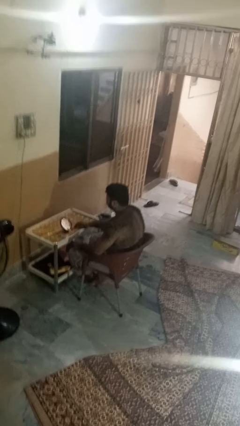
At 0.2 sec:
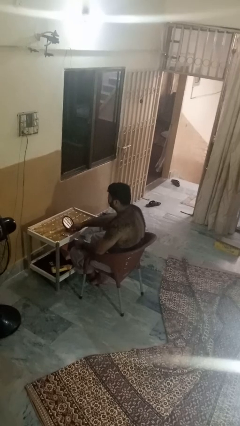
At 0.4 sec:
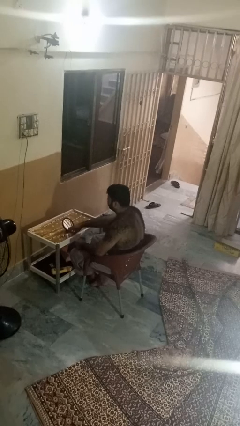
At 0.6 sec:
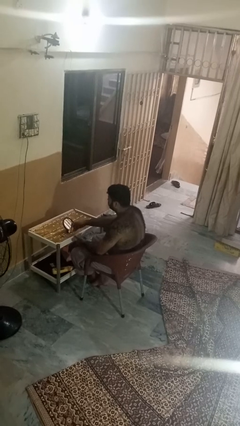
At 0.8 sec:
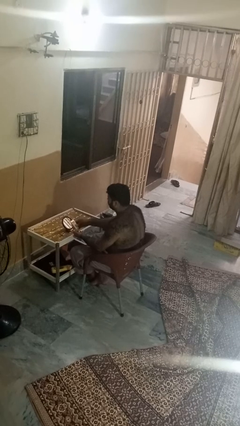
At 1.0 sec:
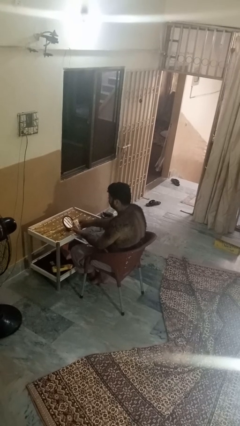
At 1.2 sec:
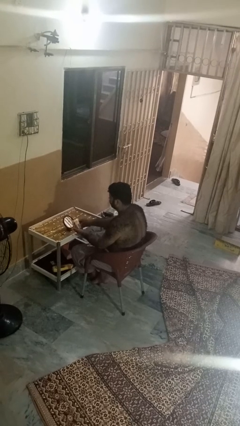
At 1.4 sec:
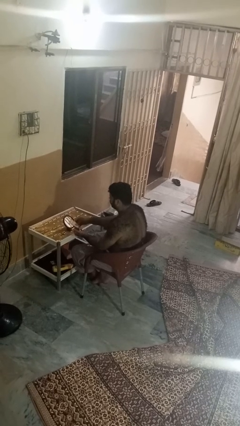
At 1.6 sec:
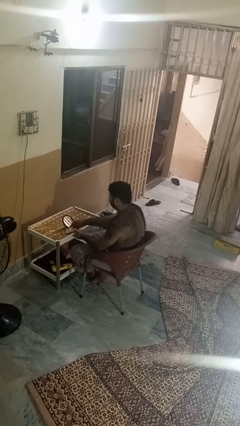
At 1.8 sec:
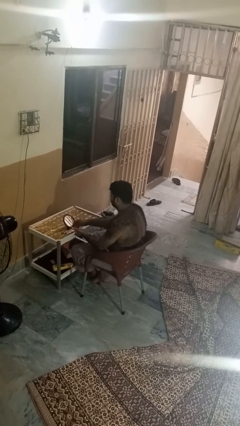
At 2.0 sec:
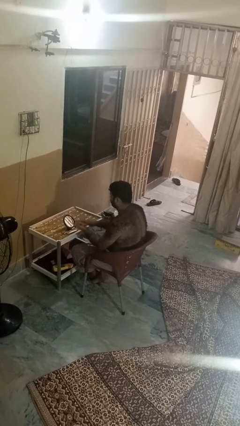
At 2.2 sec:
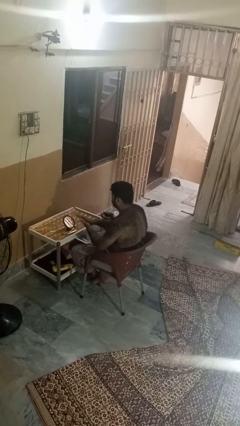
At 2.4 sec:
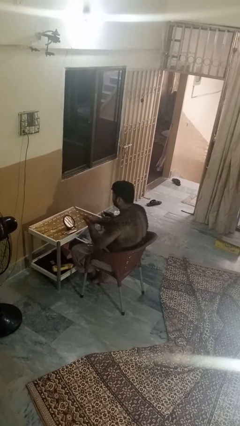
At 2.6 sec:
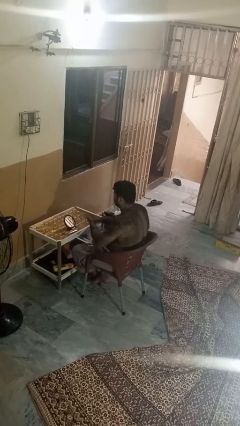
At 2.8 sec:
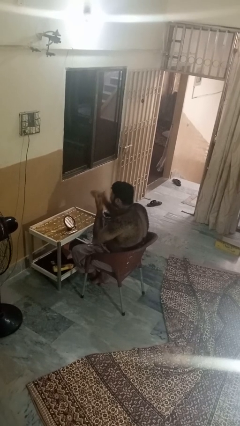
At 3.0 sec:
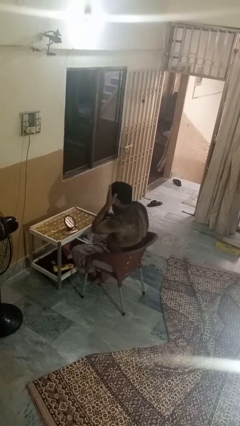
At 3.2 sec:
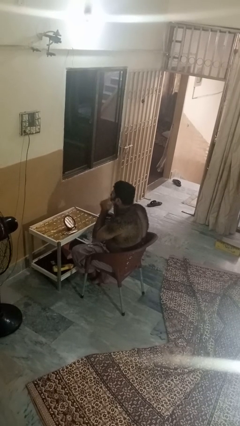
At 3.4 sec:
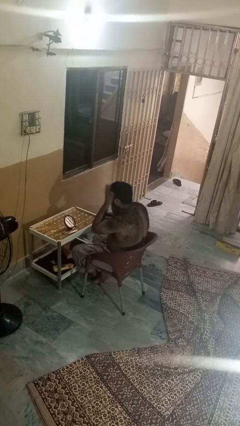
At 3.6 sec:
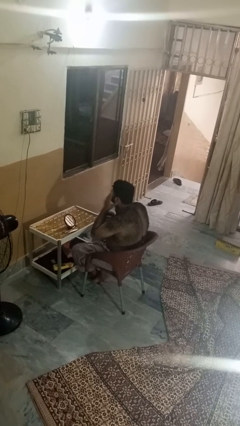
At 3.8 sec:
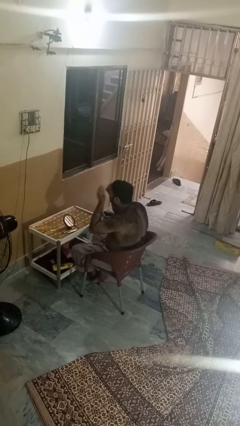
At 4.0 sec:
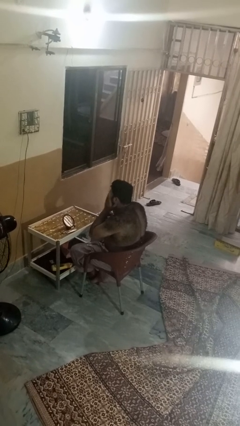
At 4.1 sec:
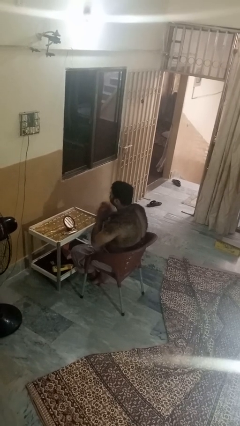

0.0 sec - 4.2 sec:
person applies foundation makeup

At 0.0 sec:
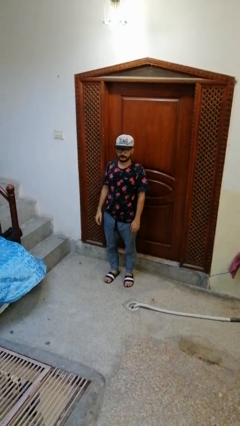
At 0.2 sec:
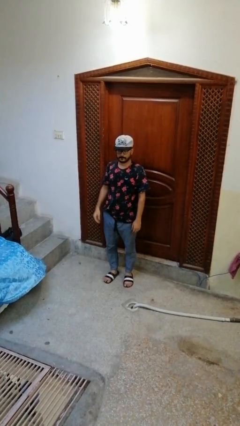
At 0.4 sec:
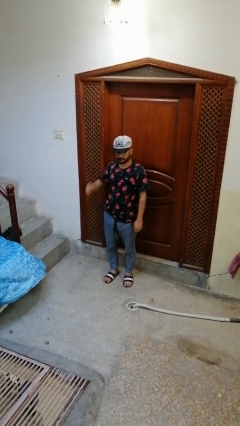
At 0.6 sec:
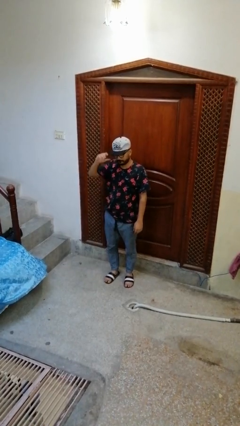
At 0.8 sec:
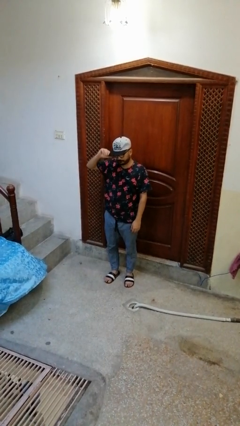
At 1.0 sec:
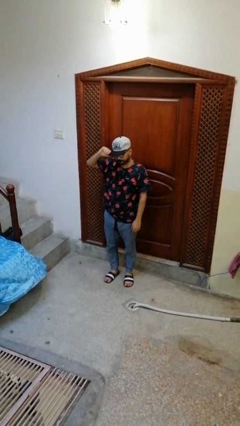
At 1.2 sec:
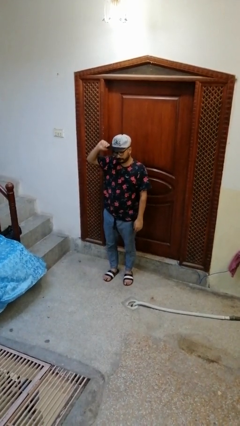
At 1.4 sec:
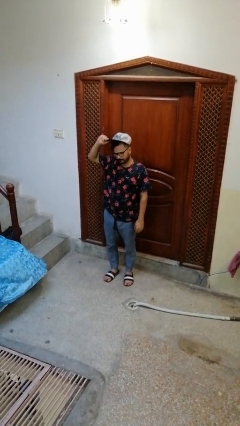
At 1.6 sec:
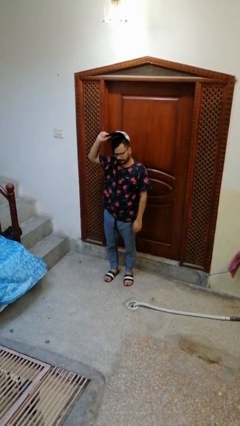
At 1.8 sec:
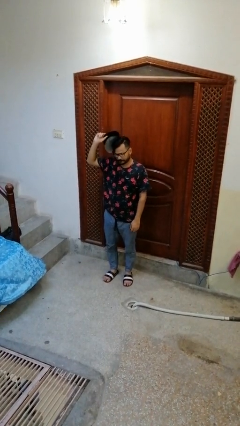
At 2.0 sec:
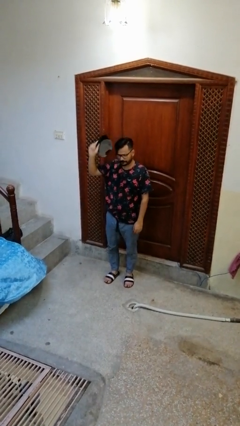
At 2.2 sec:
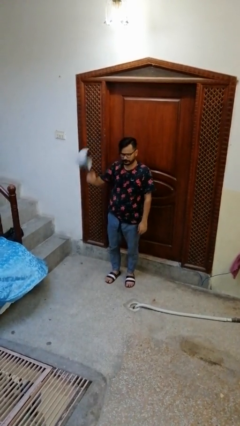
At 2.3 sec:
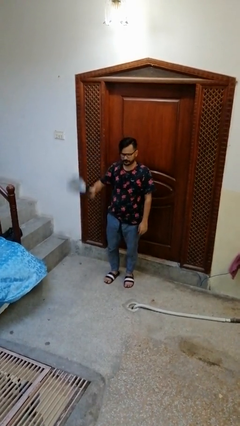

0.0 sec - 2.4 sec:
person takes off hat

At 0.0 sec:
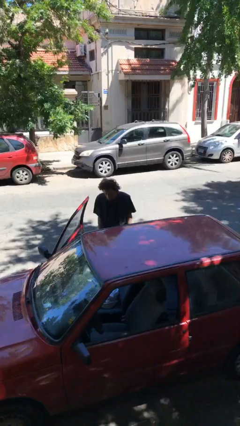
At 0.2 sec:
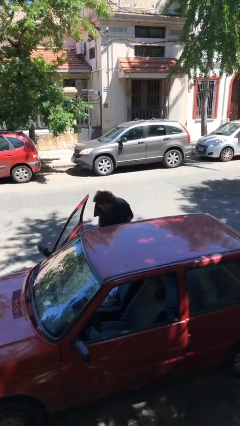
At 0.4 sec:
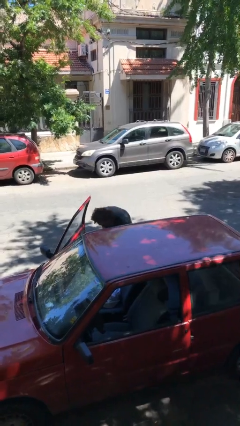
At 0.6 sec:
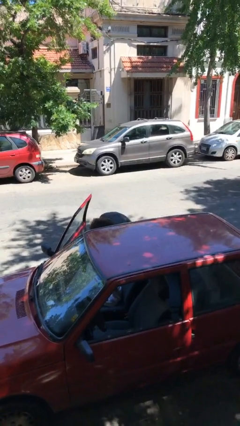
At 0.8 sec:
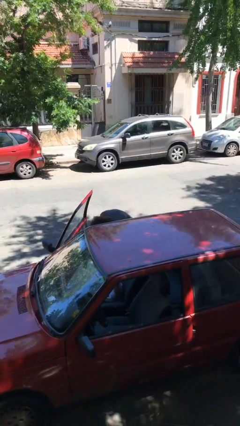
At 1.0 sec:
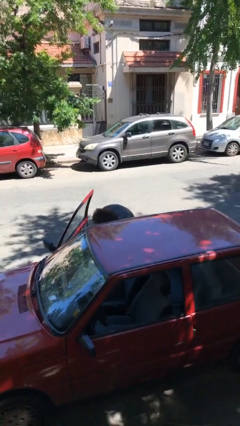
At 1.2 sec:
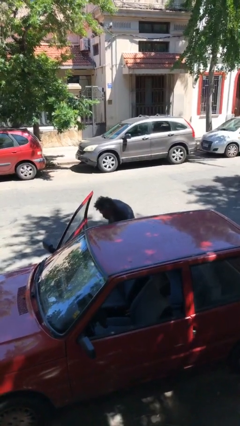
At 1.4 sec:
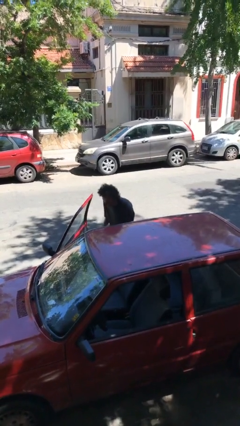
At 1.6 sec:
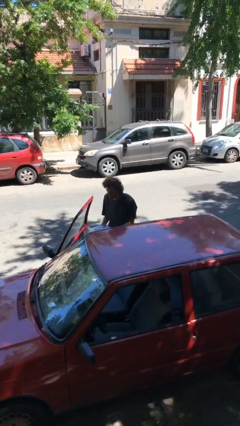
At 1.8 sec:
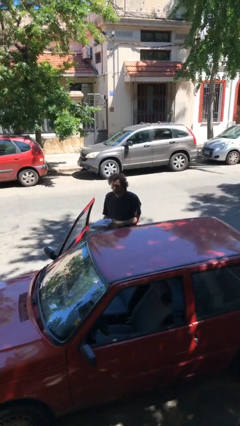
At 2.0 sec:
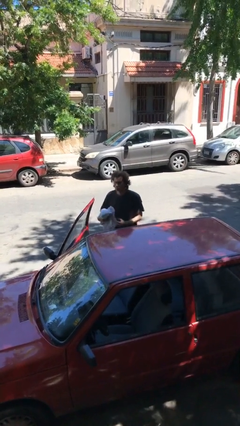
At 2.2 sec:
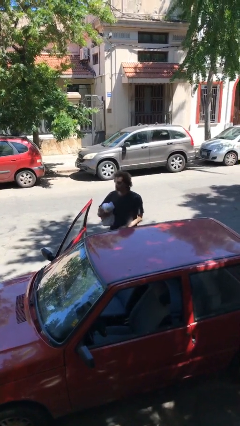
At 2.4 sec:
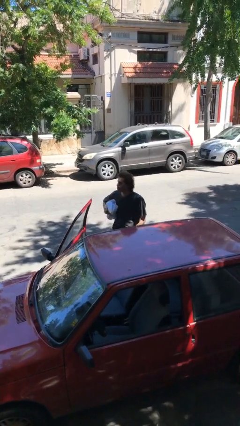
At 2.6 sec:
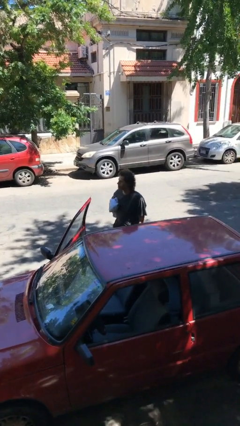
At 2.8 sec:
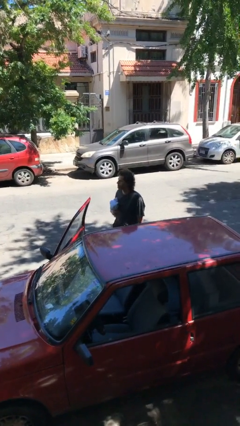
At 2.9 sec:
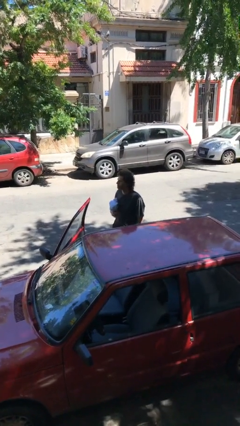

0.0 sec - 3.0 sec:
person unloads car

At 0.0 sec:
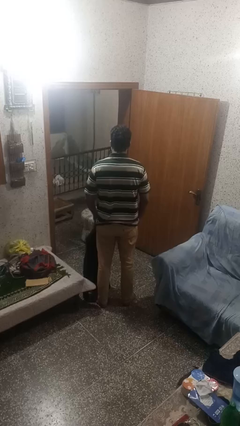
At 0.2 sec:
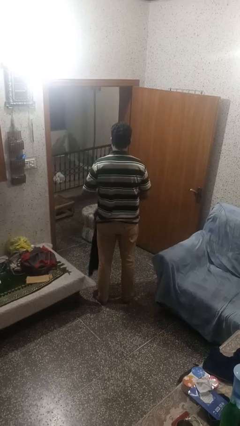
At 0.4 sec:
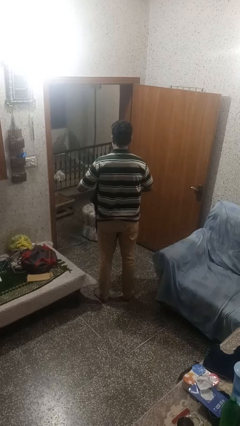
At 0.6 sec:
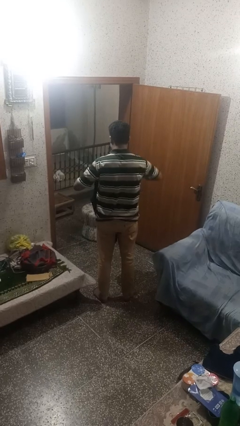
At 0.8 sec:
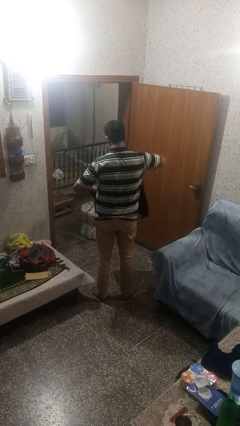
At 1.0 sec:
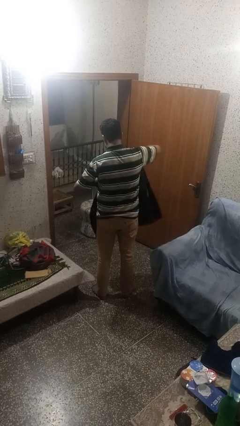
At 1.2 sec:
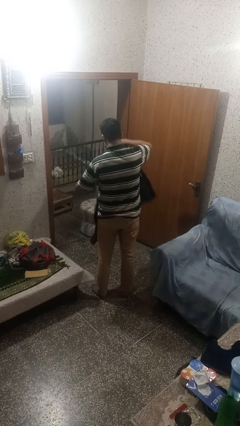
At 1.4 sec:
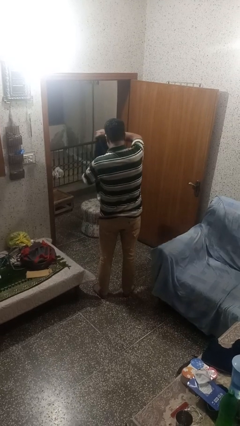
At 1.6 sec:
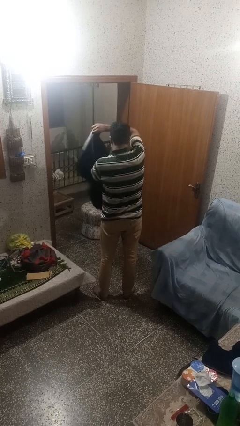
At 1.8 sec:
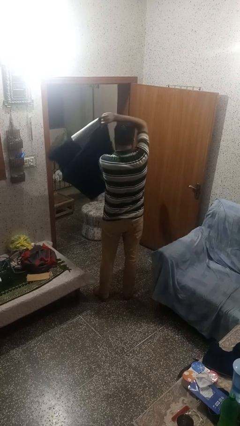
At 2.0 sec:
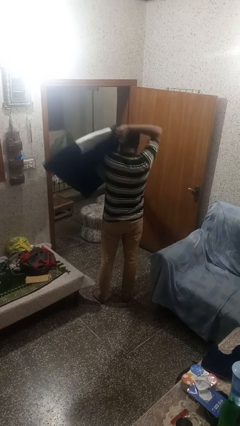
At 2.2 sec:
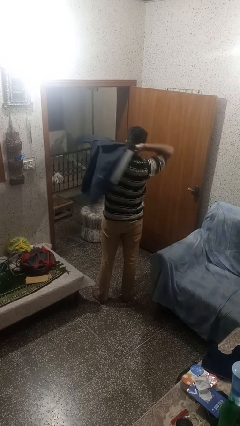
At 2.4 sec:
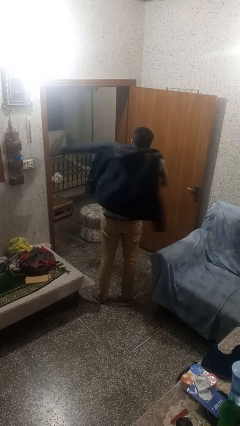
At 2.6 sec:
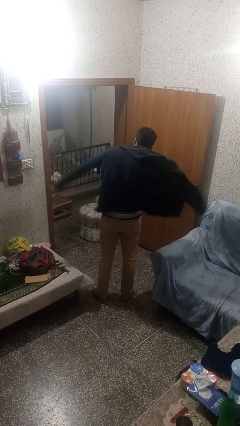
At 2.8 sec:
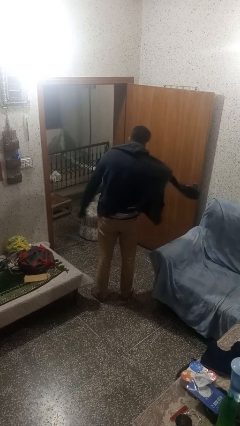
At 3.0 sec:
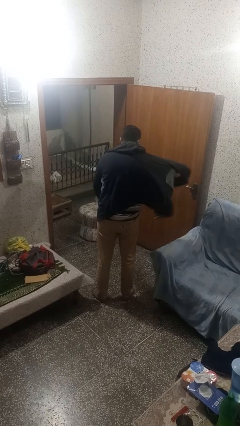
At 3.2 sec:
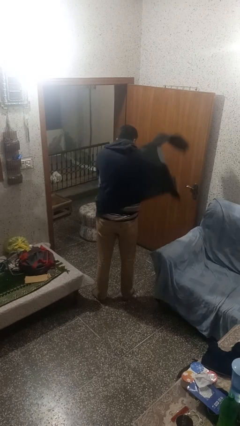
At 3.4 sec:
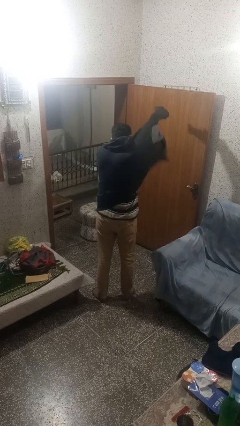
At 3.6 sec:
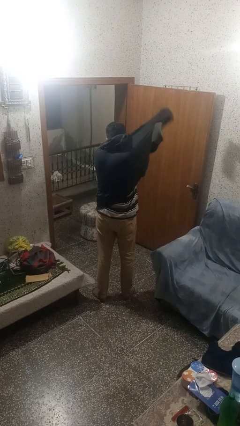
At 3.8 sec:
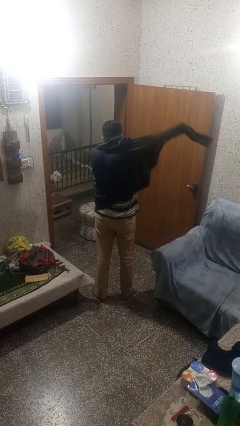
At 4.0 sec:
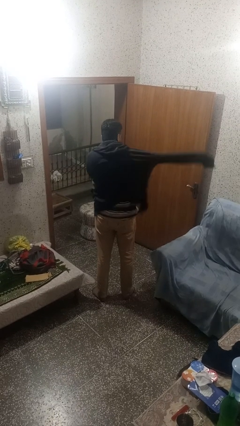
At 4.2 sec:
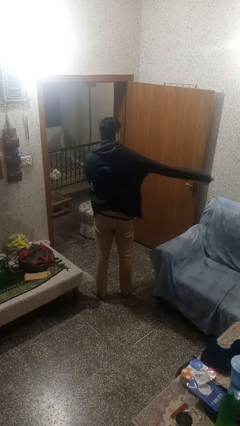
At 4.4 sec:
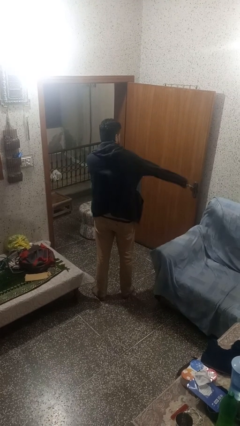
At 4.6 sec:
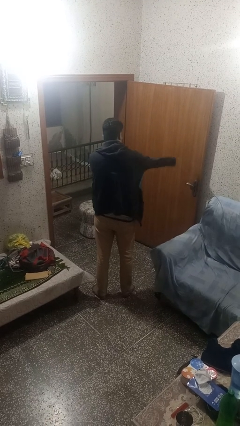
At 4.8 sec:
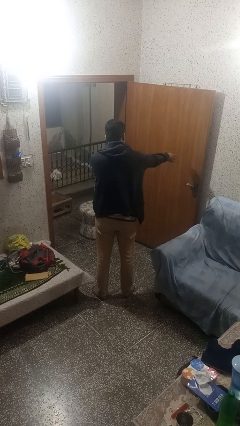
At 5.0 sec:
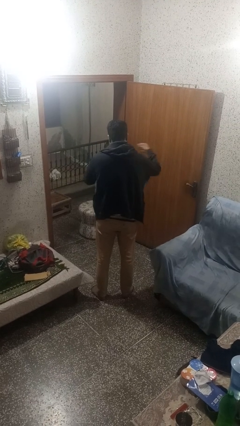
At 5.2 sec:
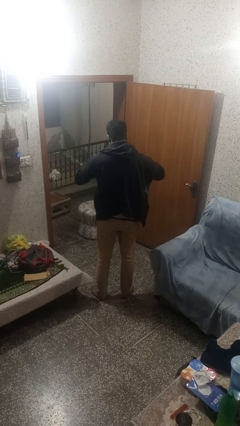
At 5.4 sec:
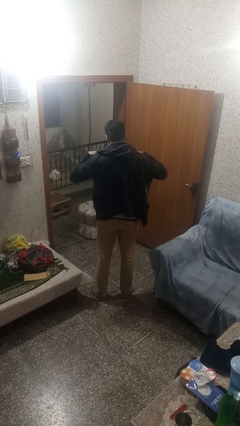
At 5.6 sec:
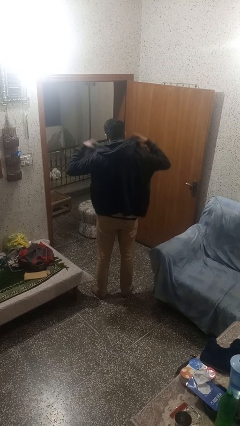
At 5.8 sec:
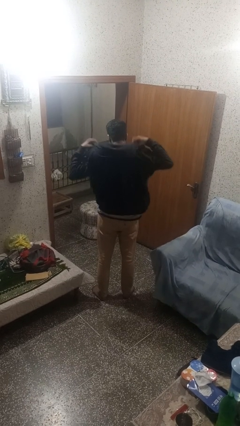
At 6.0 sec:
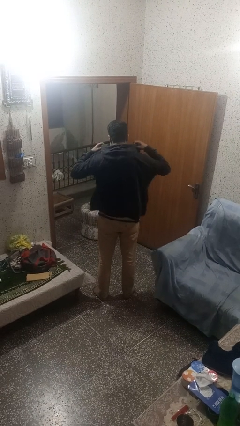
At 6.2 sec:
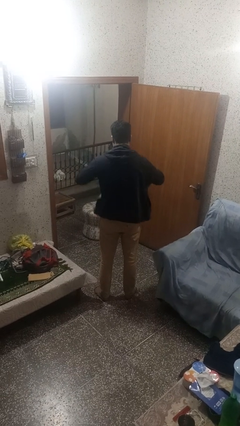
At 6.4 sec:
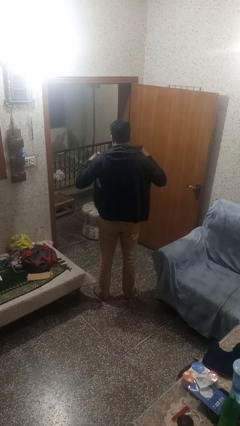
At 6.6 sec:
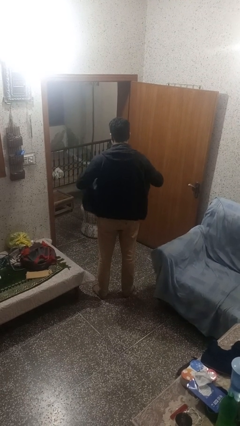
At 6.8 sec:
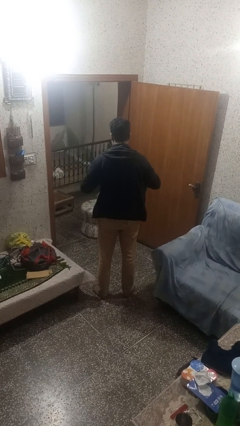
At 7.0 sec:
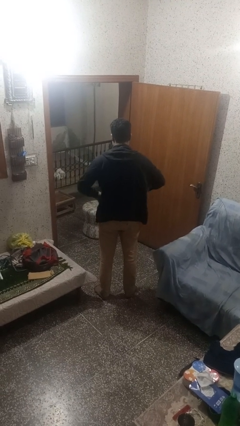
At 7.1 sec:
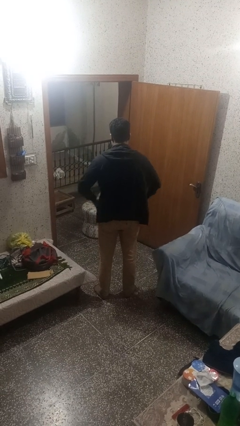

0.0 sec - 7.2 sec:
person puts on jacket
